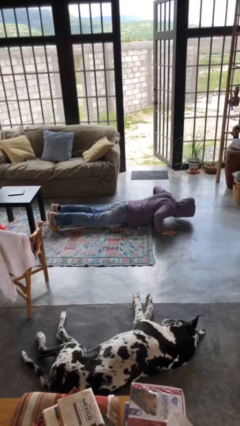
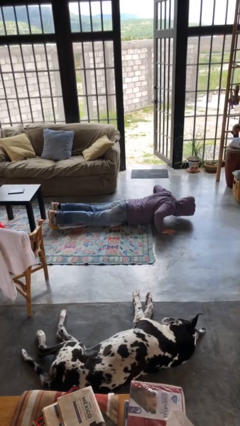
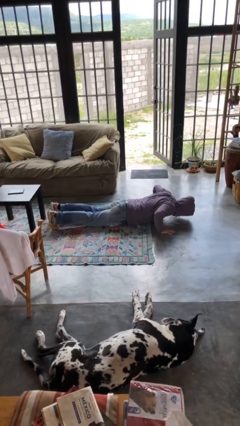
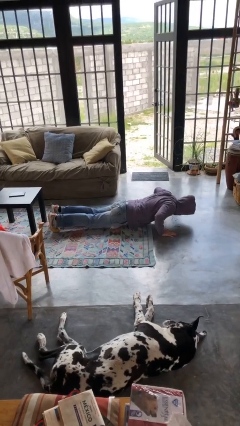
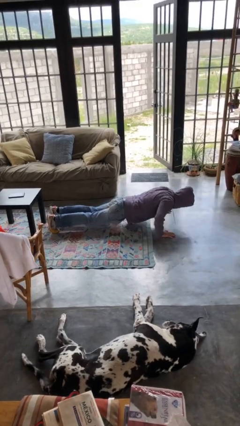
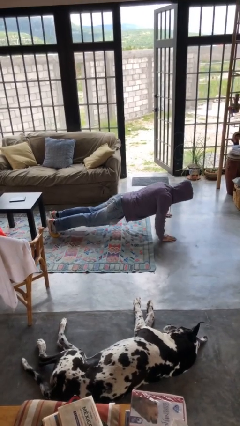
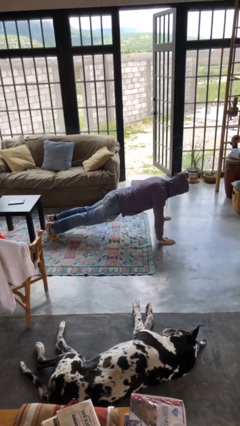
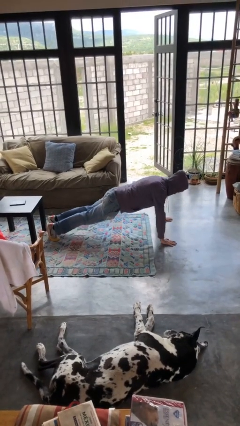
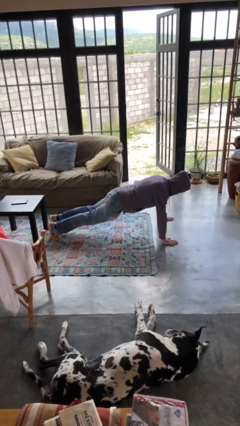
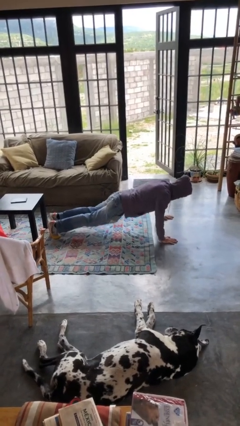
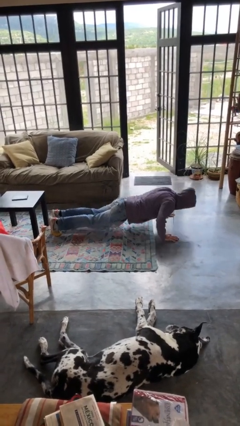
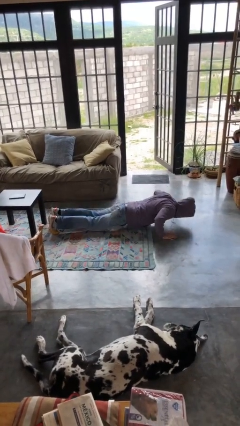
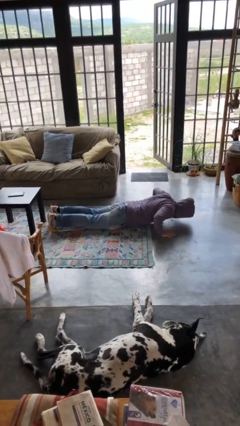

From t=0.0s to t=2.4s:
person exercises with pushup

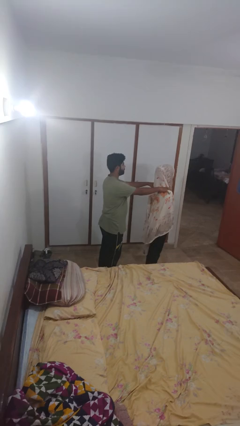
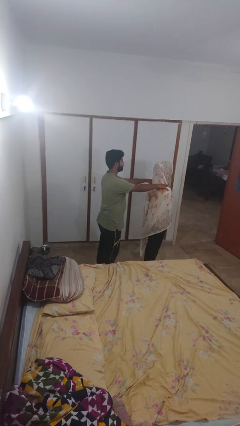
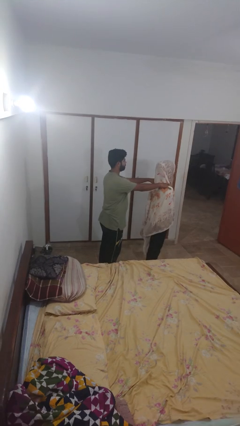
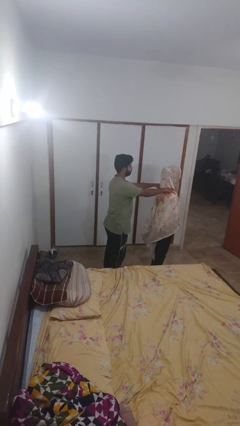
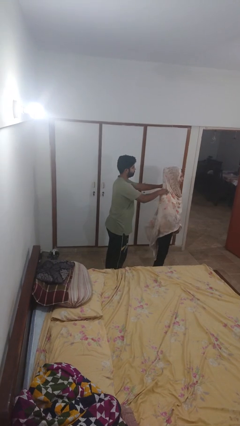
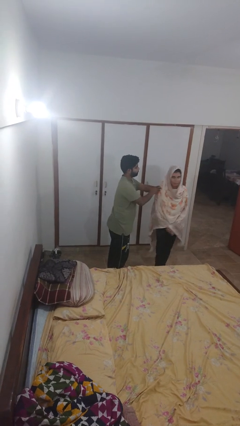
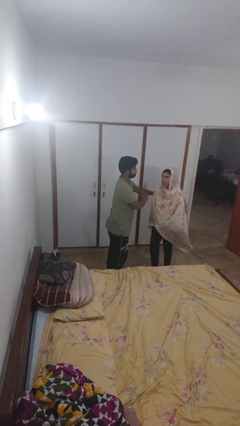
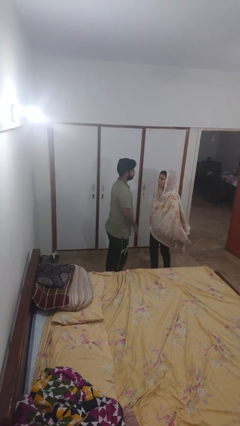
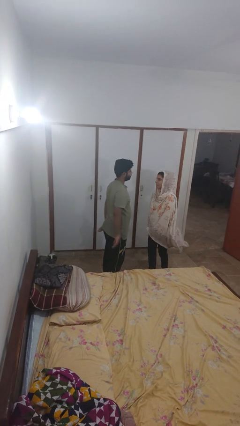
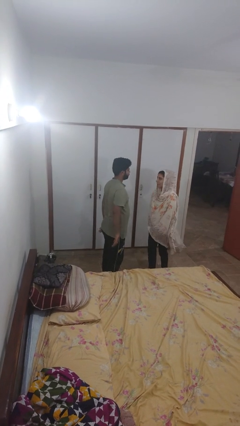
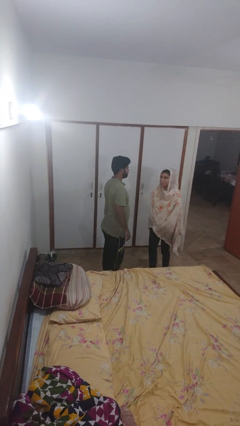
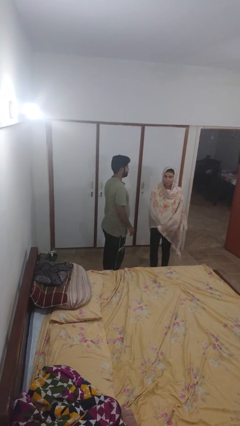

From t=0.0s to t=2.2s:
person spins person around

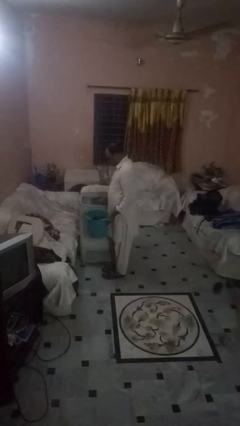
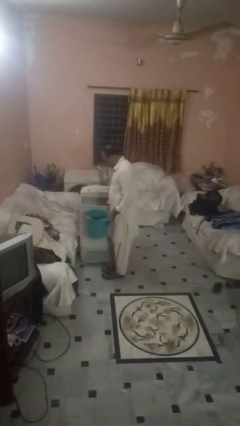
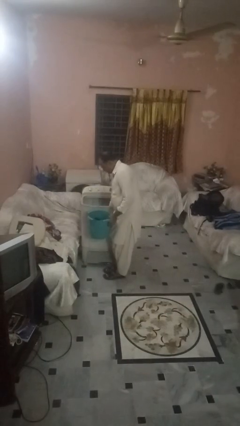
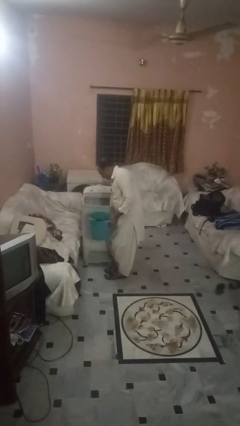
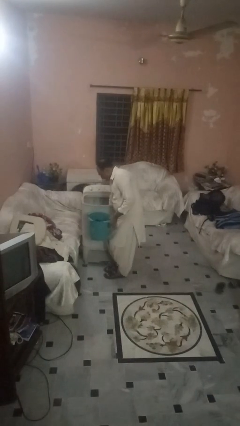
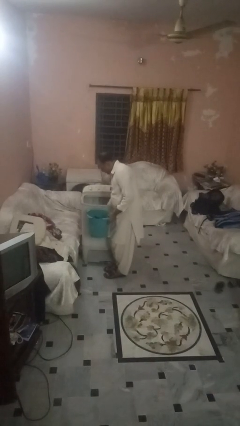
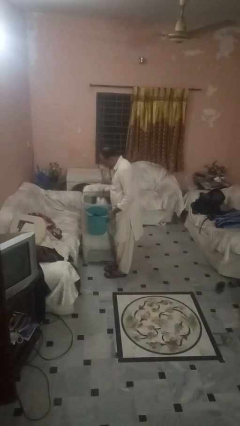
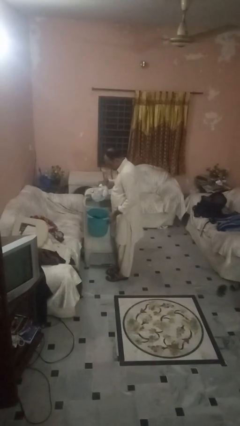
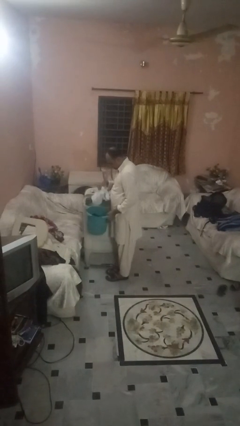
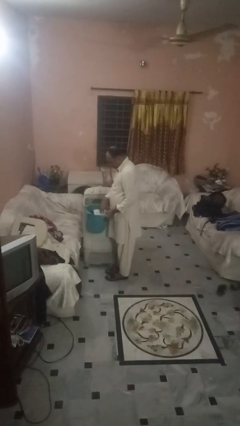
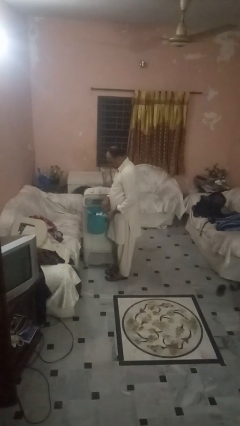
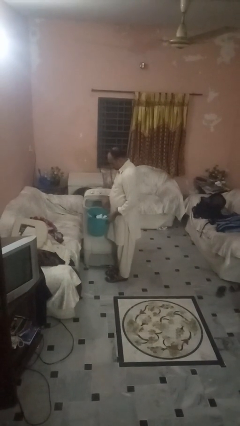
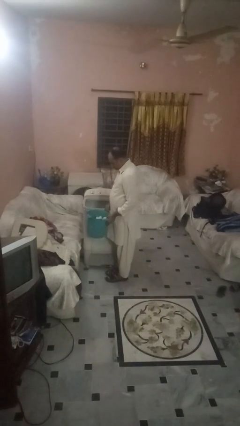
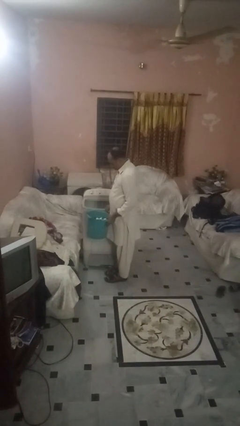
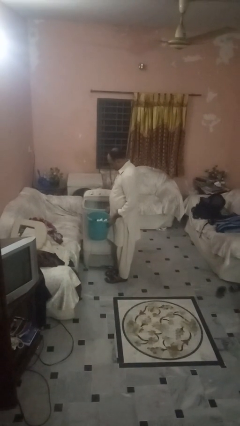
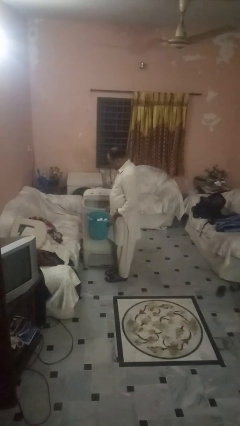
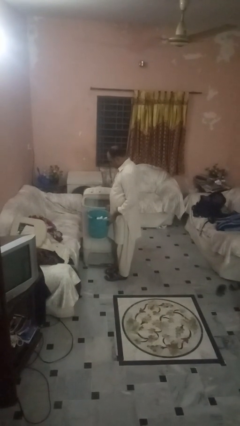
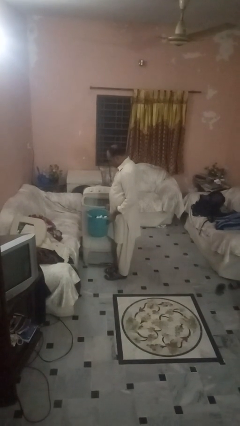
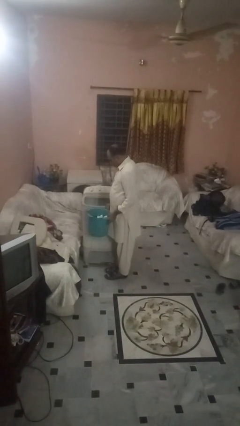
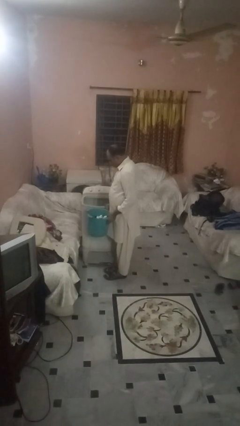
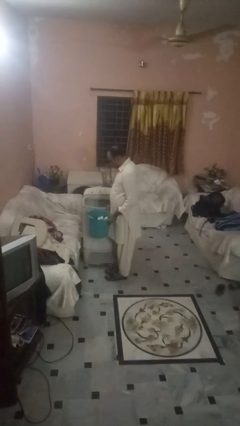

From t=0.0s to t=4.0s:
person unloads clotheswasher

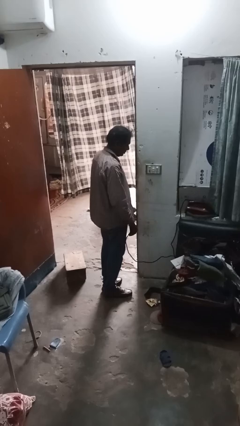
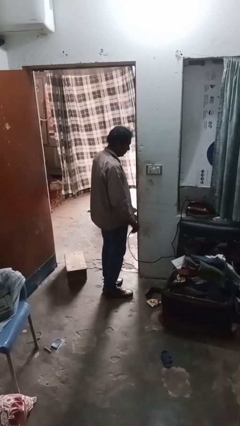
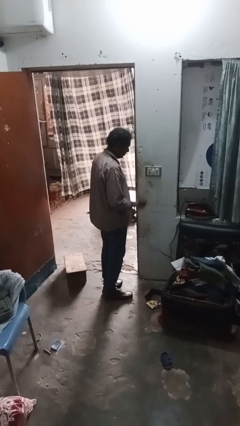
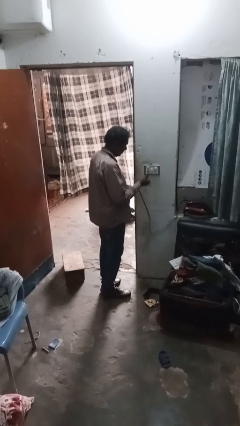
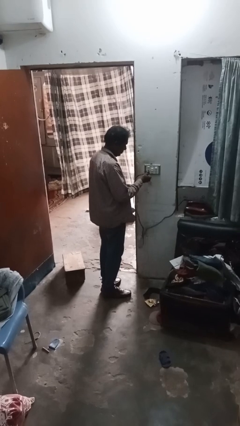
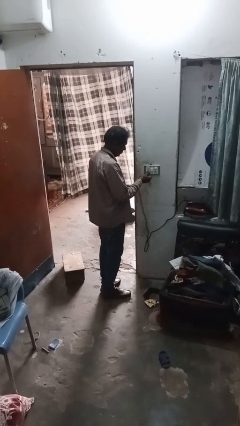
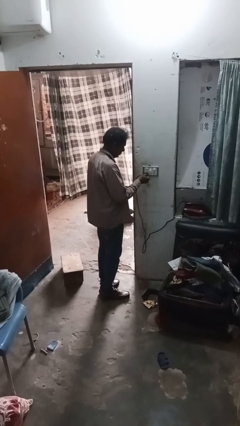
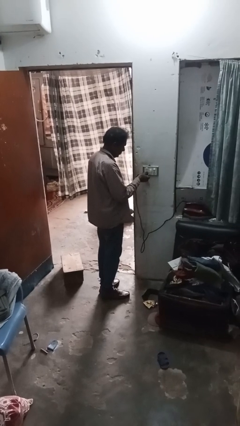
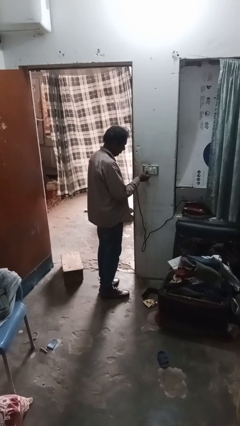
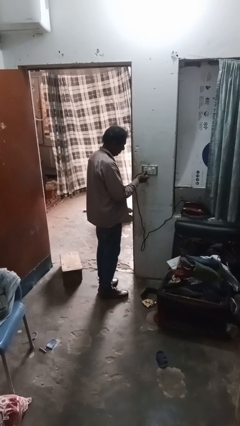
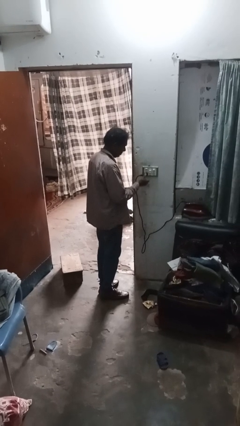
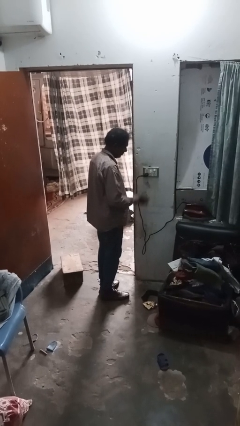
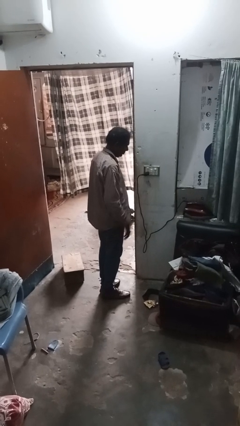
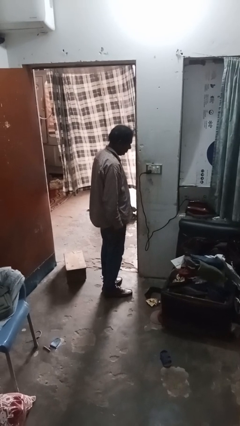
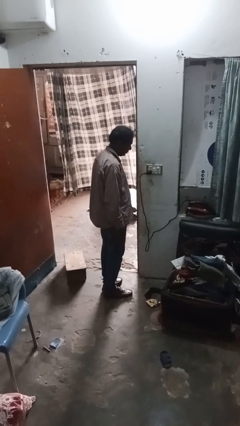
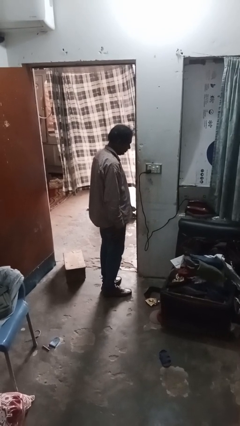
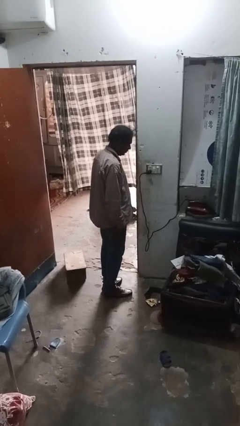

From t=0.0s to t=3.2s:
person plugs into electrical socket

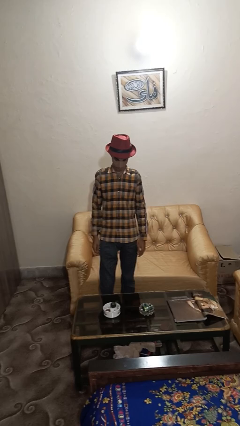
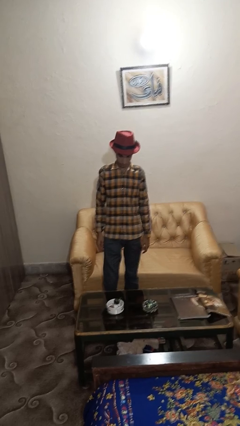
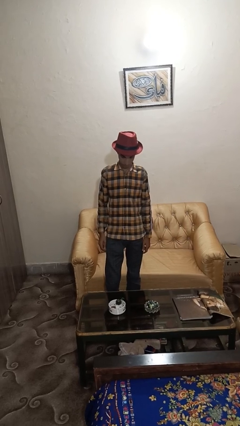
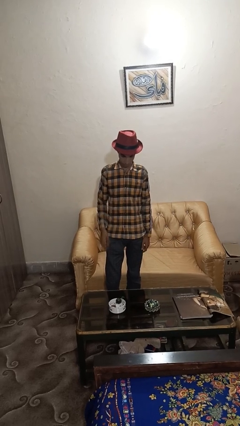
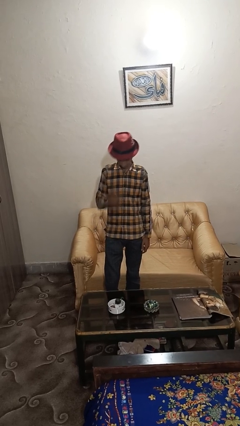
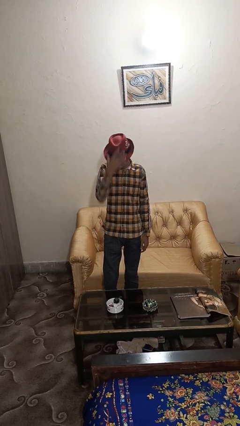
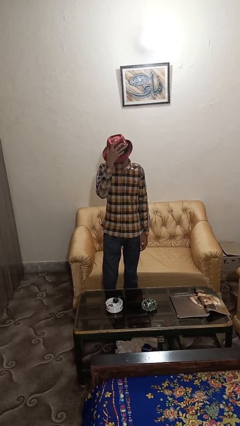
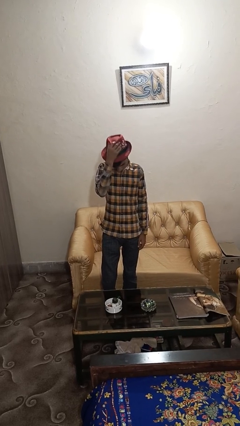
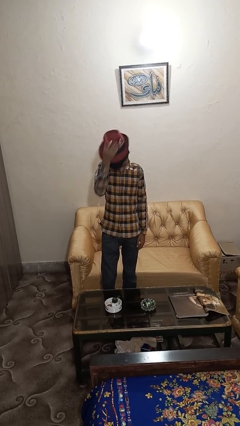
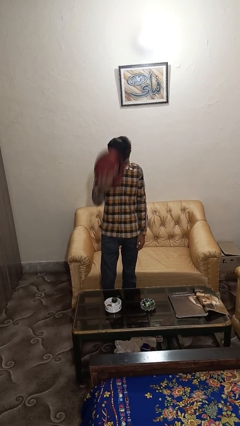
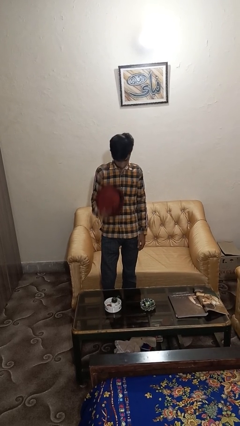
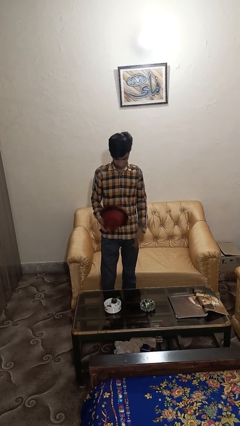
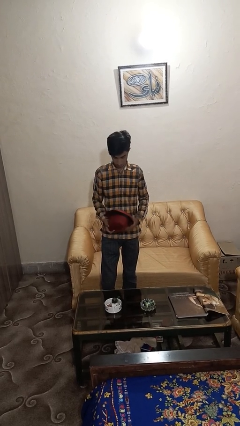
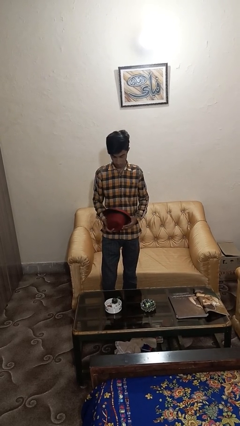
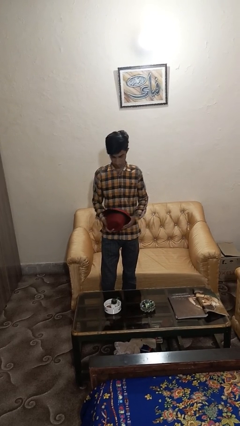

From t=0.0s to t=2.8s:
person takes off hat

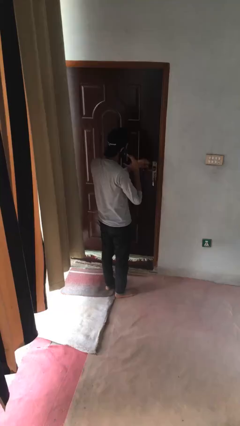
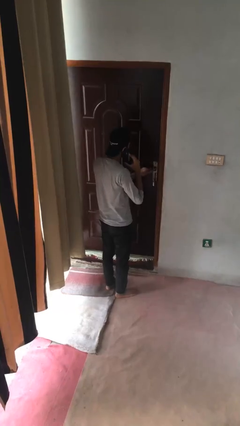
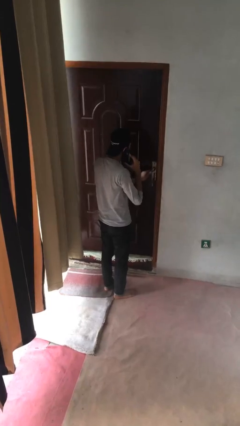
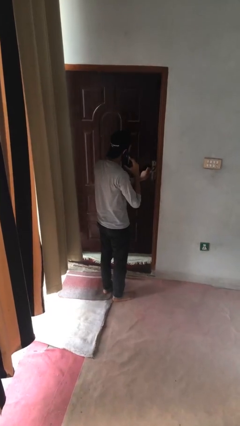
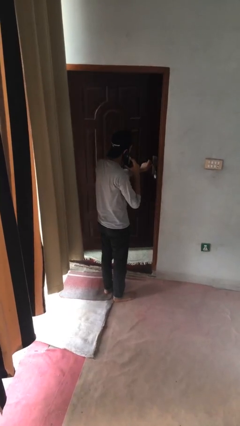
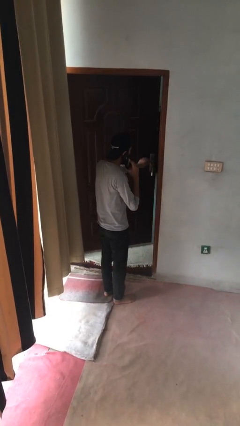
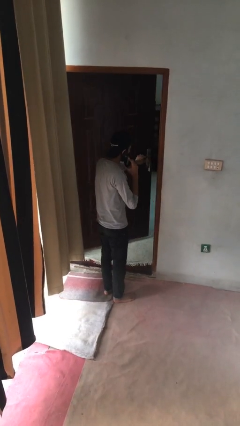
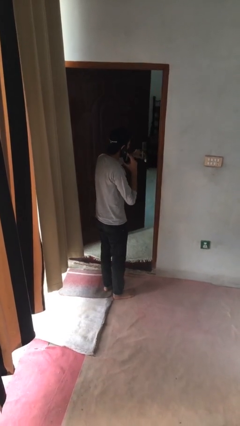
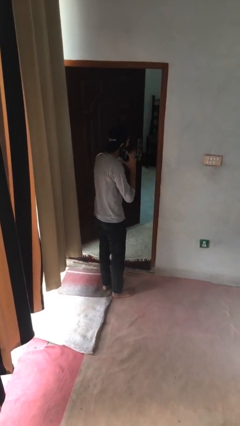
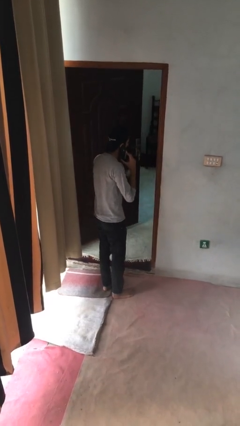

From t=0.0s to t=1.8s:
person opens facility door

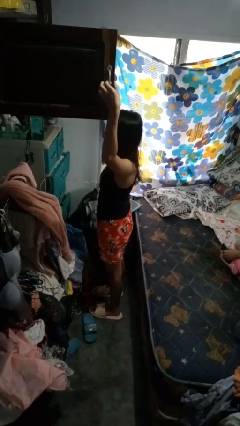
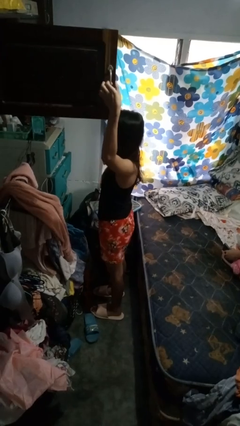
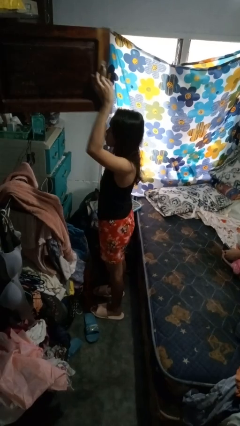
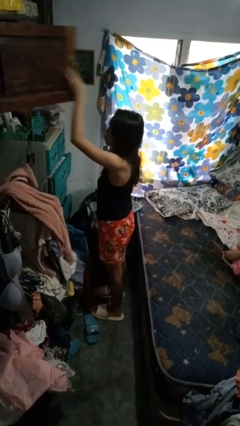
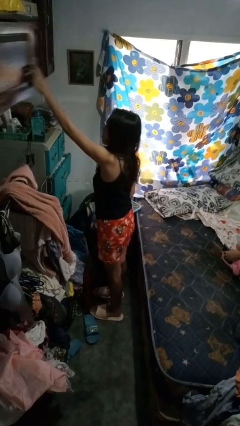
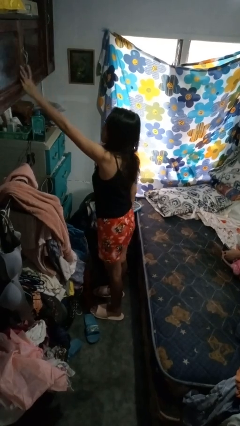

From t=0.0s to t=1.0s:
person closes closet door
